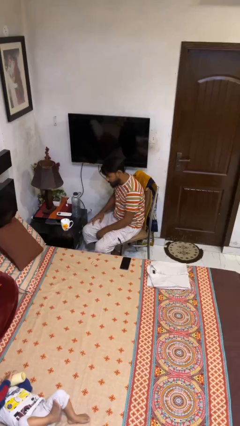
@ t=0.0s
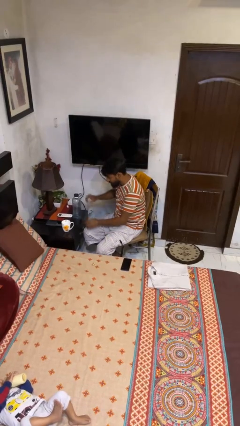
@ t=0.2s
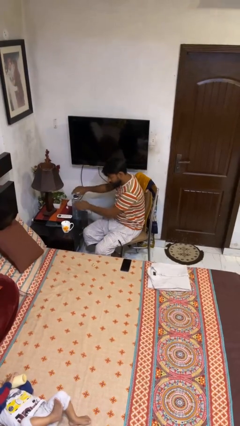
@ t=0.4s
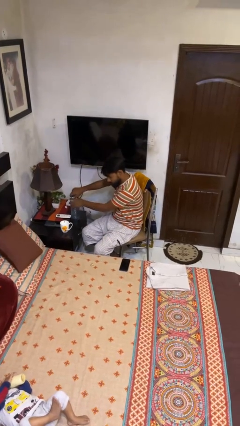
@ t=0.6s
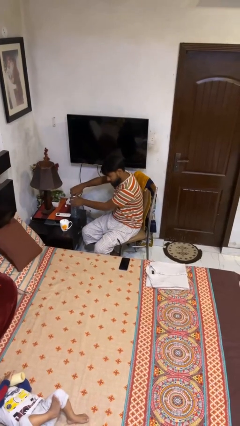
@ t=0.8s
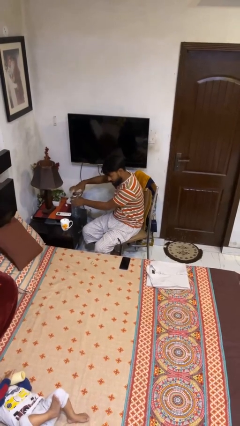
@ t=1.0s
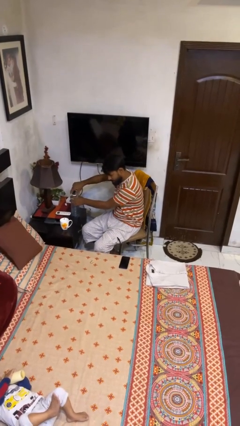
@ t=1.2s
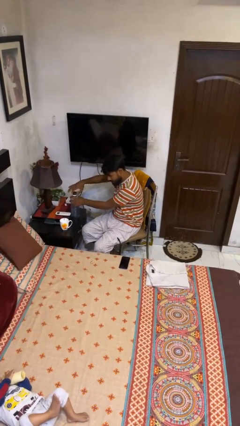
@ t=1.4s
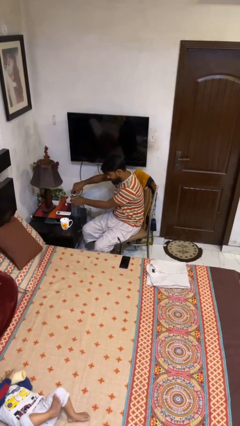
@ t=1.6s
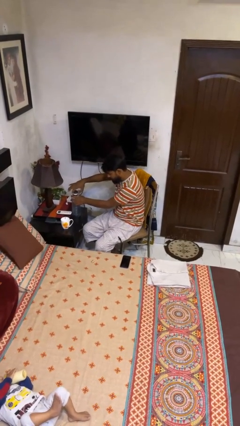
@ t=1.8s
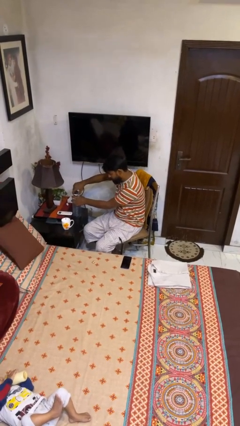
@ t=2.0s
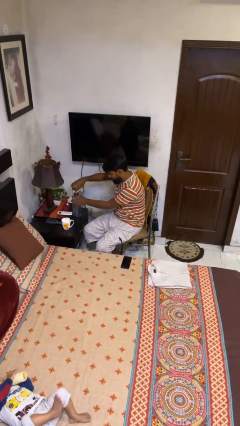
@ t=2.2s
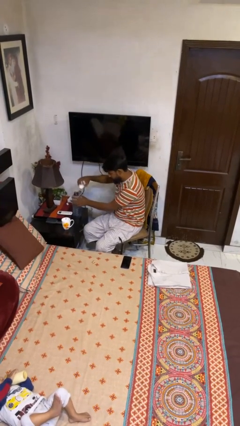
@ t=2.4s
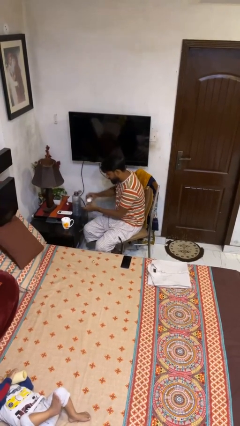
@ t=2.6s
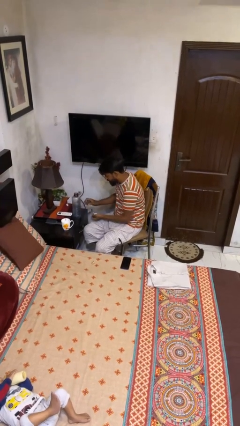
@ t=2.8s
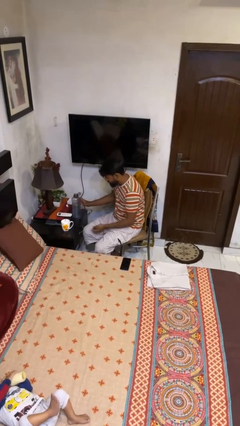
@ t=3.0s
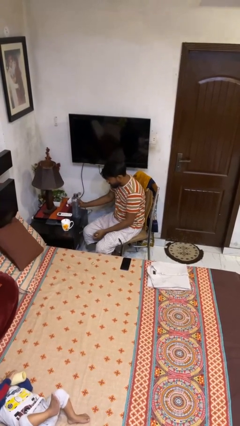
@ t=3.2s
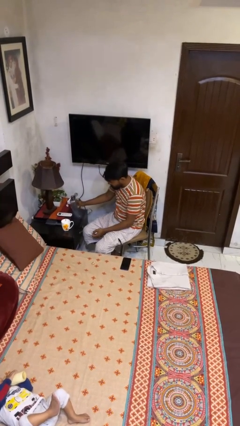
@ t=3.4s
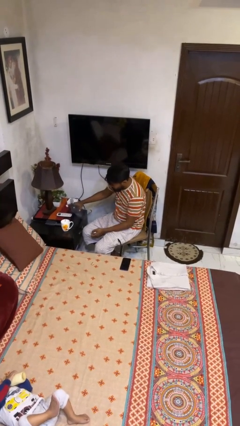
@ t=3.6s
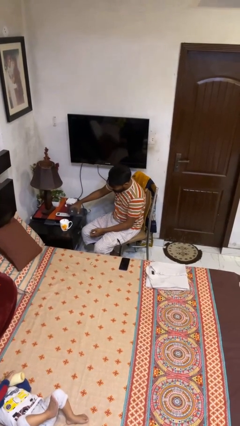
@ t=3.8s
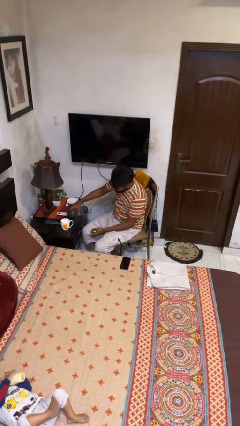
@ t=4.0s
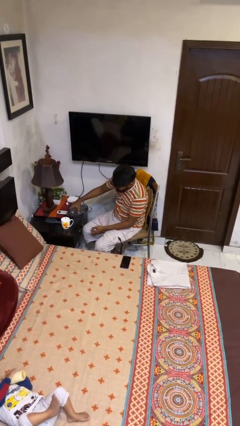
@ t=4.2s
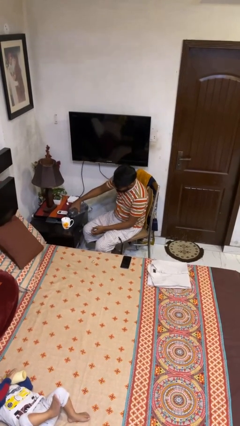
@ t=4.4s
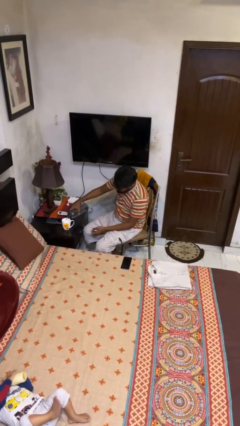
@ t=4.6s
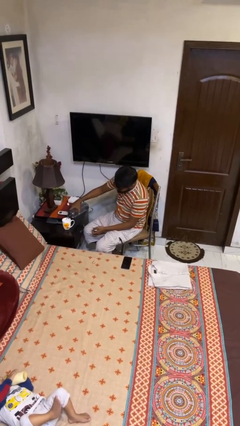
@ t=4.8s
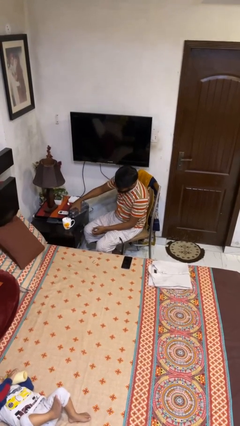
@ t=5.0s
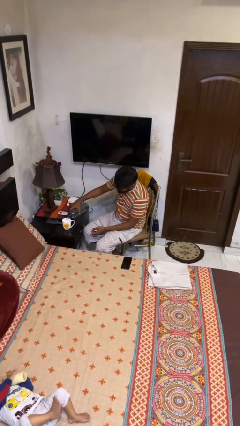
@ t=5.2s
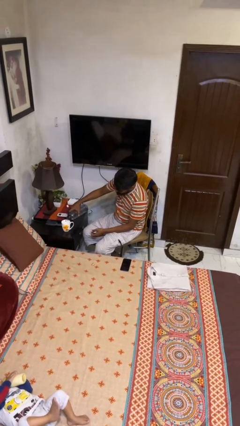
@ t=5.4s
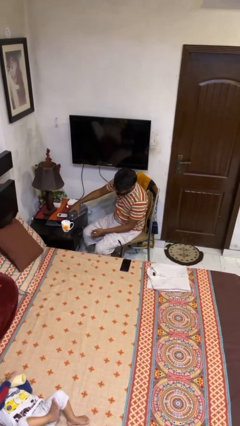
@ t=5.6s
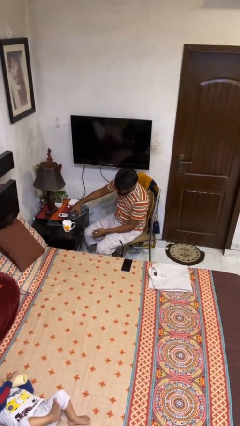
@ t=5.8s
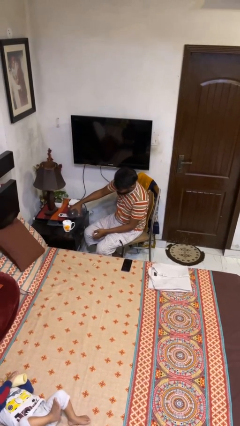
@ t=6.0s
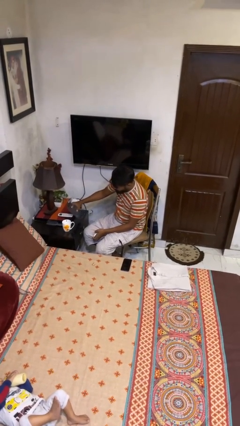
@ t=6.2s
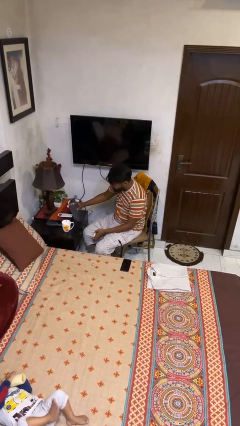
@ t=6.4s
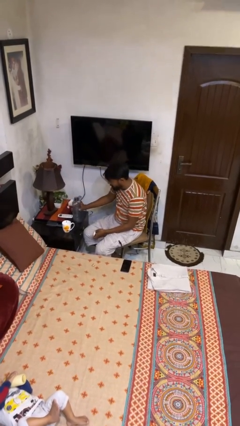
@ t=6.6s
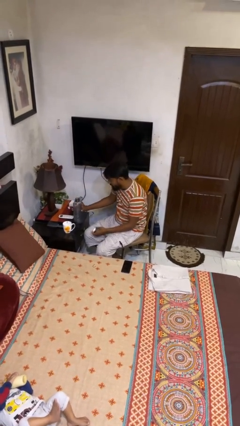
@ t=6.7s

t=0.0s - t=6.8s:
person unscrews lid from bottle

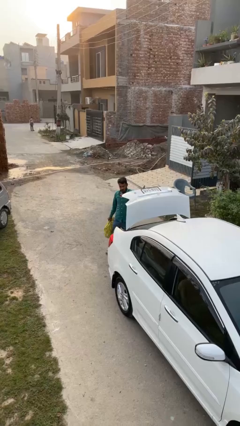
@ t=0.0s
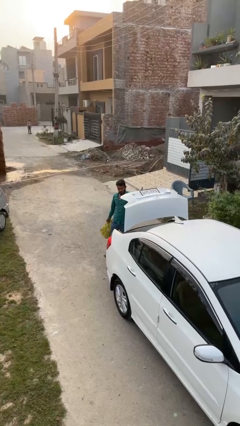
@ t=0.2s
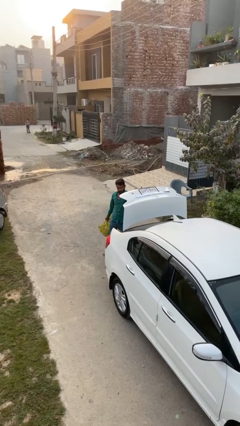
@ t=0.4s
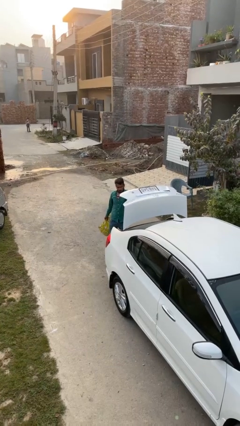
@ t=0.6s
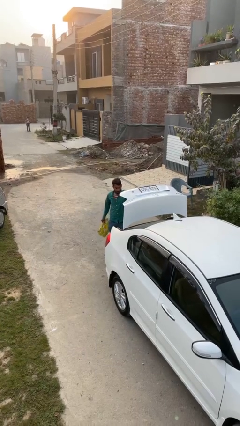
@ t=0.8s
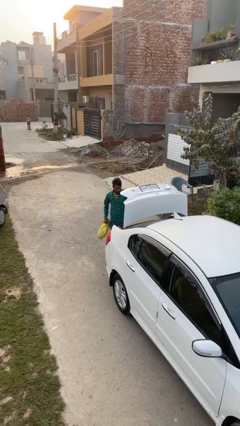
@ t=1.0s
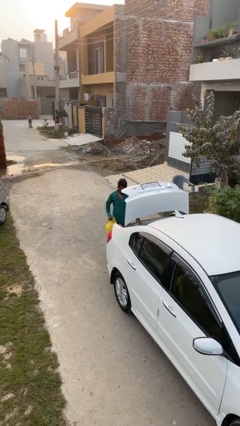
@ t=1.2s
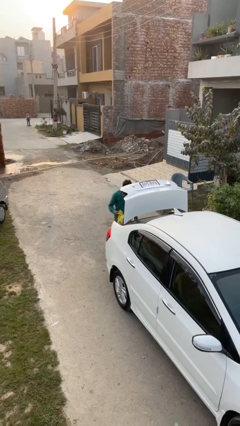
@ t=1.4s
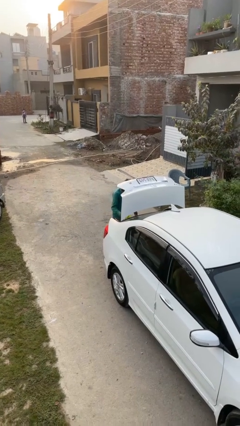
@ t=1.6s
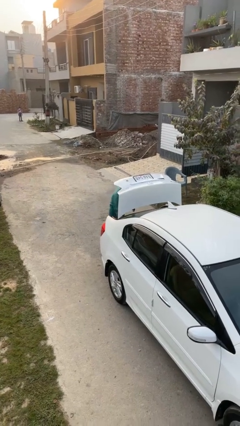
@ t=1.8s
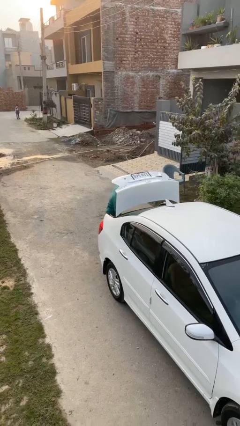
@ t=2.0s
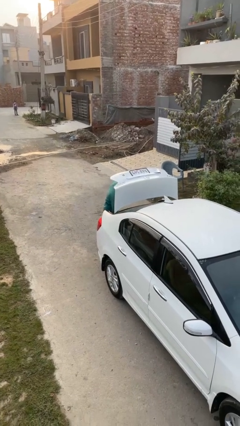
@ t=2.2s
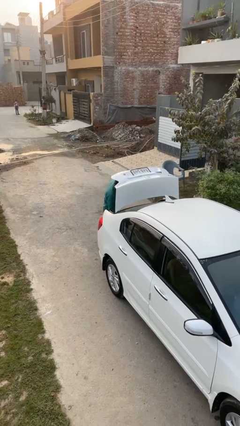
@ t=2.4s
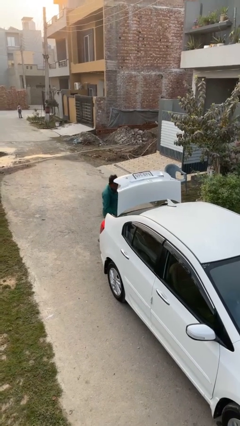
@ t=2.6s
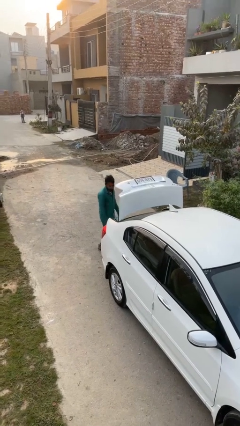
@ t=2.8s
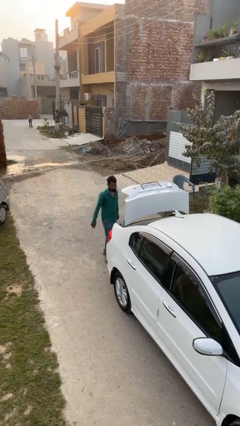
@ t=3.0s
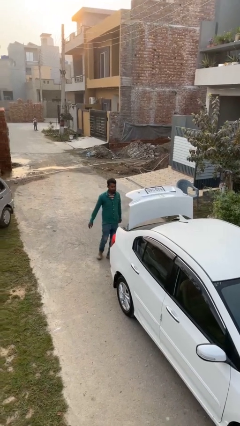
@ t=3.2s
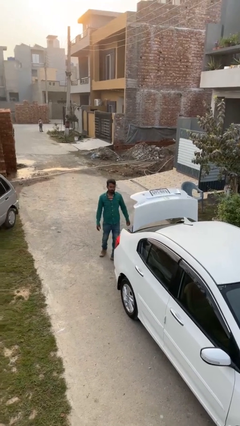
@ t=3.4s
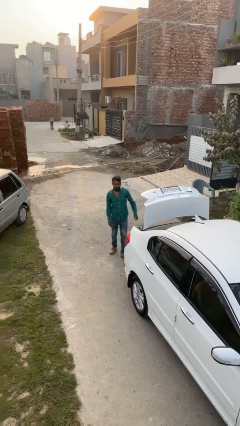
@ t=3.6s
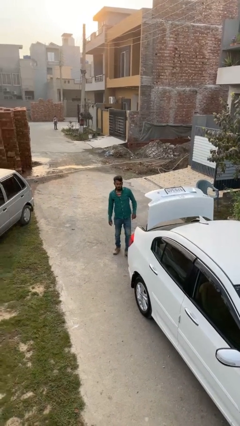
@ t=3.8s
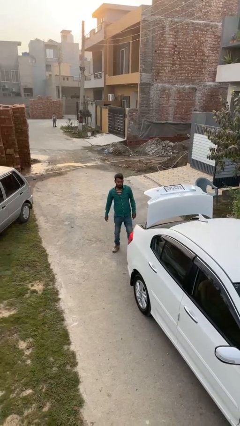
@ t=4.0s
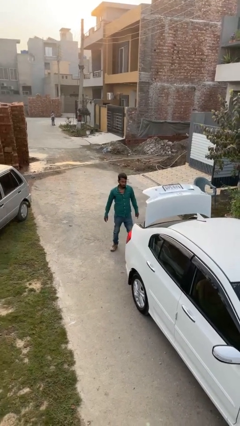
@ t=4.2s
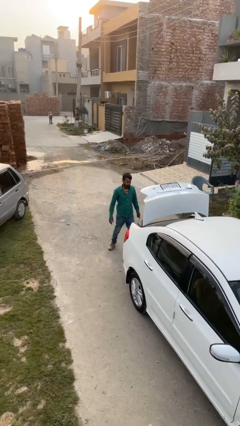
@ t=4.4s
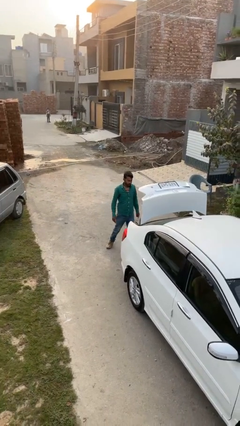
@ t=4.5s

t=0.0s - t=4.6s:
person loads car

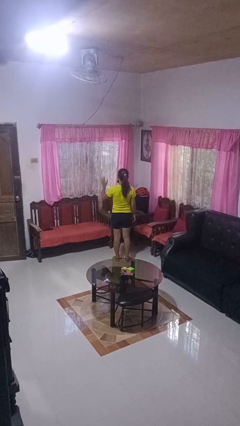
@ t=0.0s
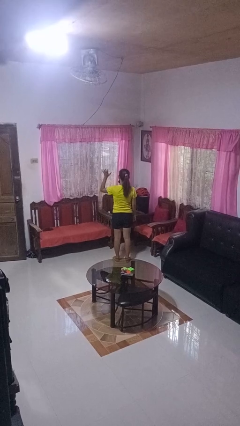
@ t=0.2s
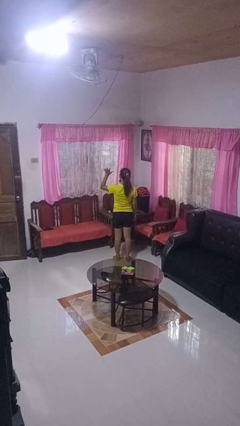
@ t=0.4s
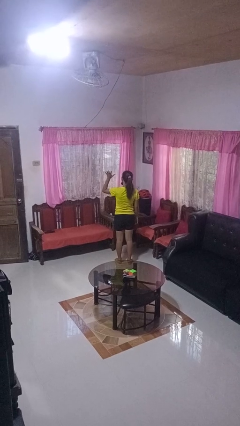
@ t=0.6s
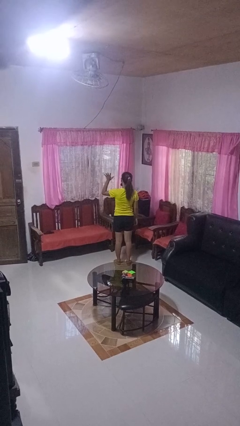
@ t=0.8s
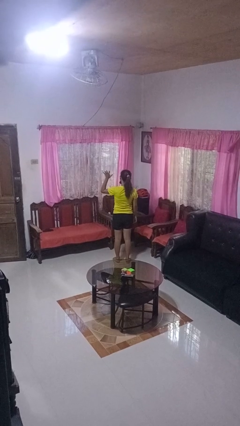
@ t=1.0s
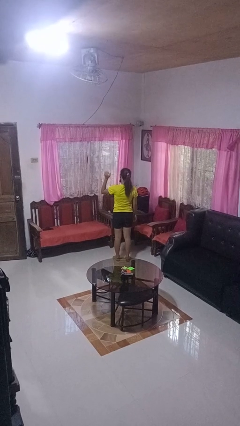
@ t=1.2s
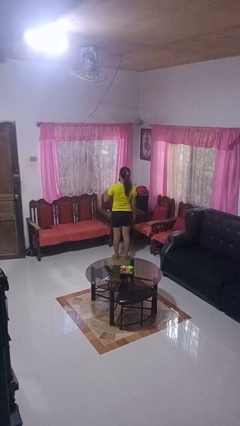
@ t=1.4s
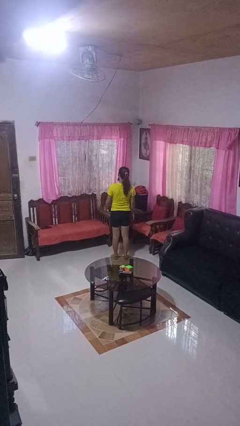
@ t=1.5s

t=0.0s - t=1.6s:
person gestures number five

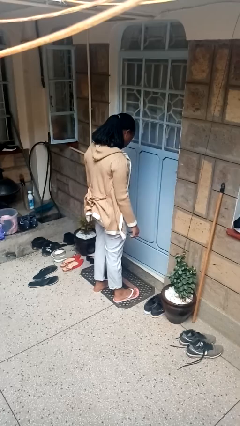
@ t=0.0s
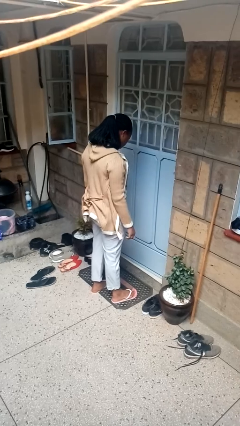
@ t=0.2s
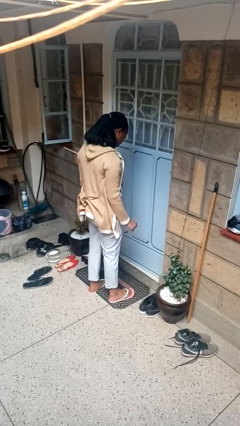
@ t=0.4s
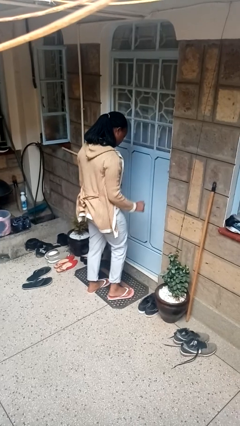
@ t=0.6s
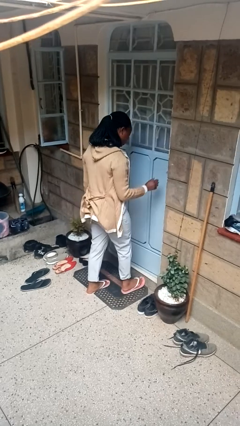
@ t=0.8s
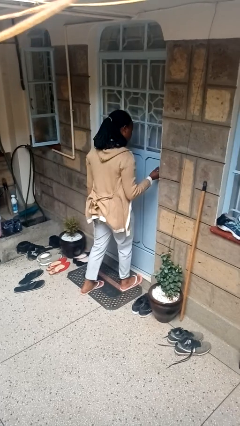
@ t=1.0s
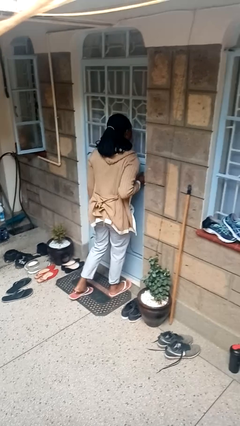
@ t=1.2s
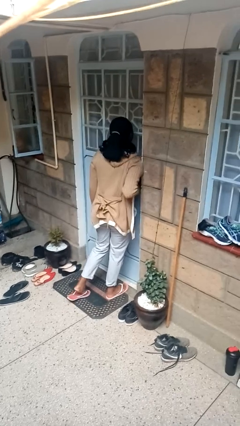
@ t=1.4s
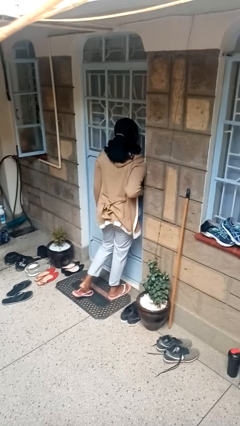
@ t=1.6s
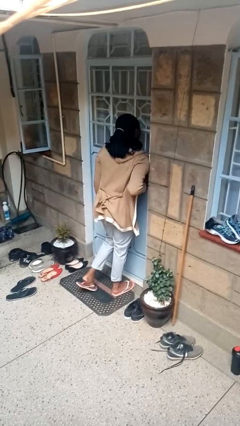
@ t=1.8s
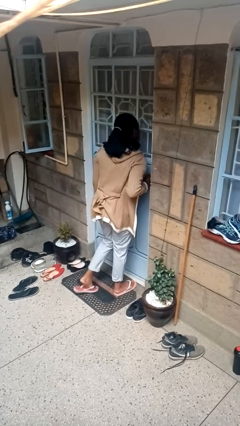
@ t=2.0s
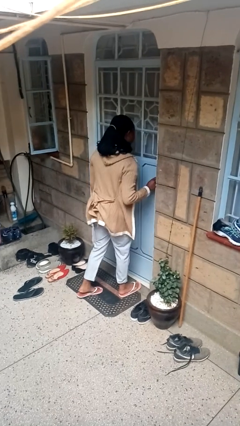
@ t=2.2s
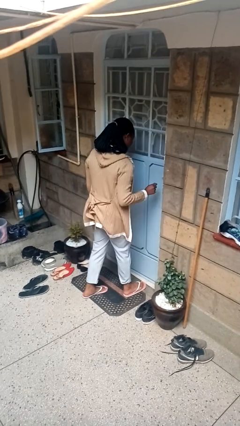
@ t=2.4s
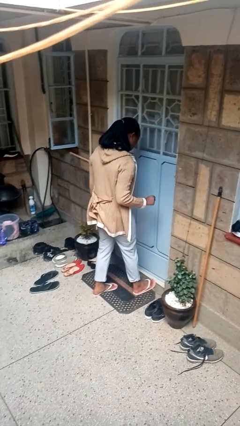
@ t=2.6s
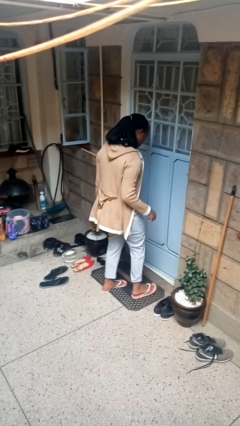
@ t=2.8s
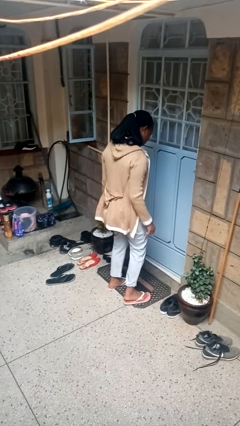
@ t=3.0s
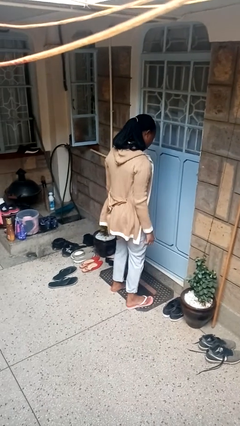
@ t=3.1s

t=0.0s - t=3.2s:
person bumps into wall

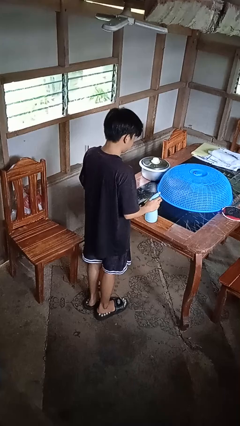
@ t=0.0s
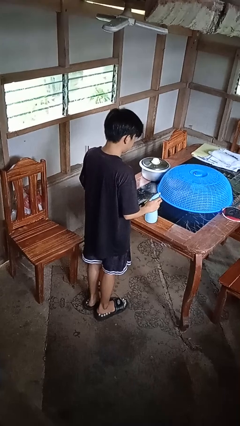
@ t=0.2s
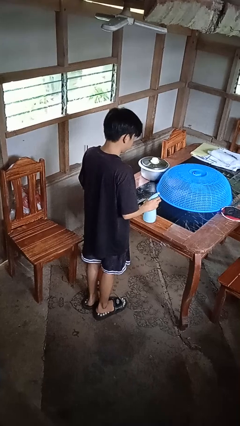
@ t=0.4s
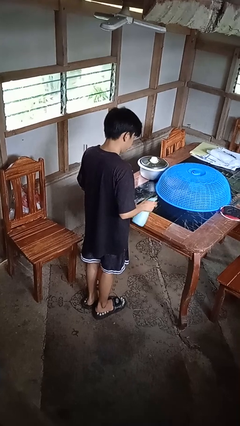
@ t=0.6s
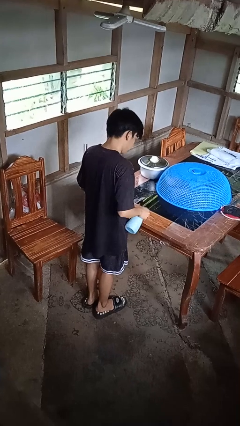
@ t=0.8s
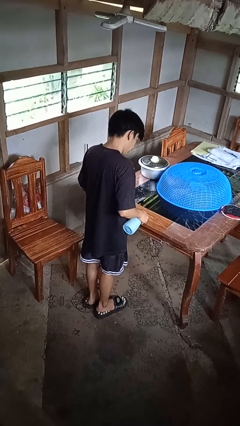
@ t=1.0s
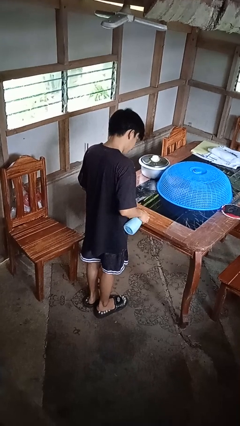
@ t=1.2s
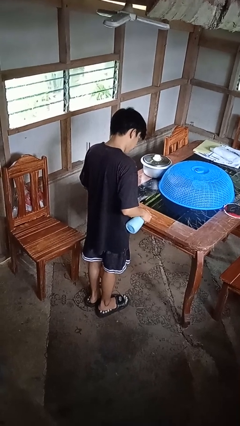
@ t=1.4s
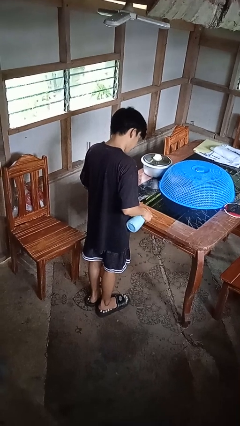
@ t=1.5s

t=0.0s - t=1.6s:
person sprays from bottle
